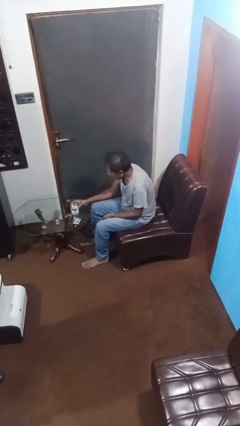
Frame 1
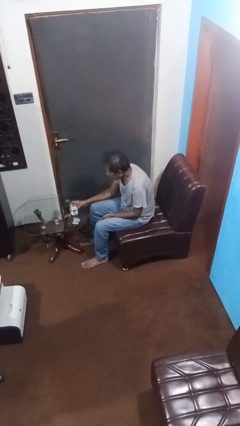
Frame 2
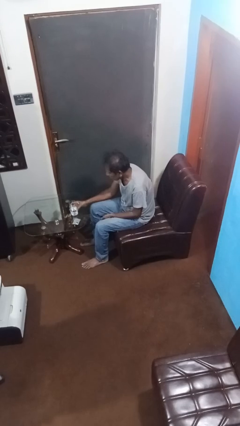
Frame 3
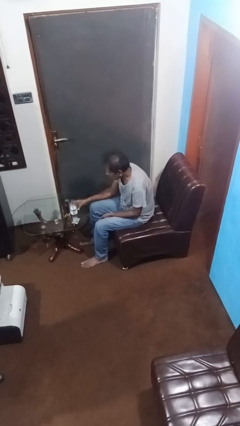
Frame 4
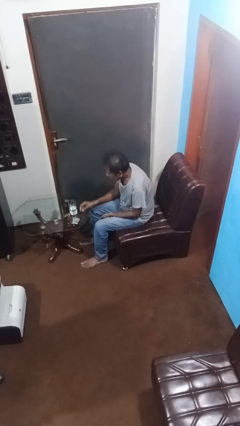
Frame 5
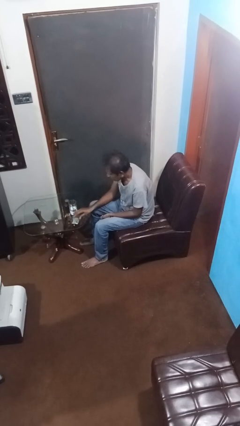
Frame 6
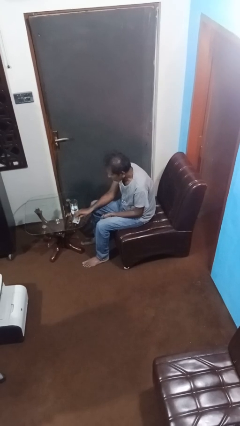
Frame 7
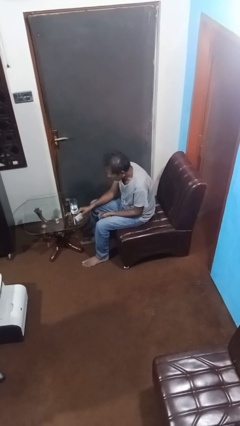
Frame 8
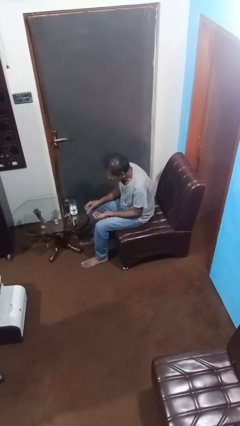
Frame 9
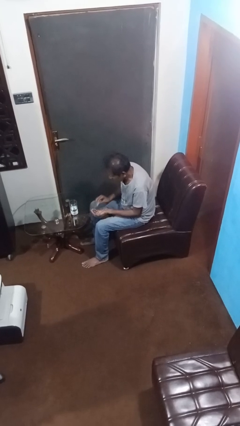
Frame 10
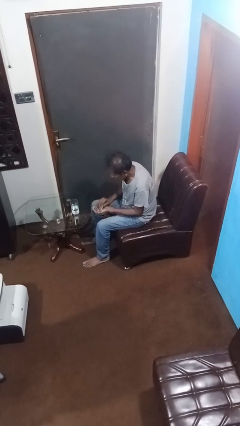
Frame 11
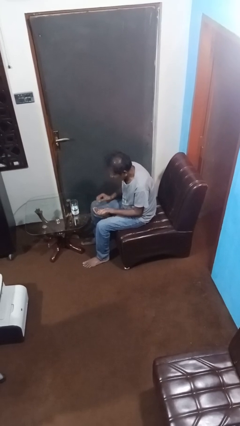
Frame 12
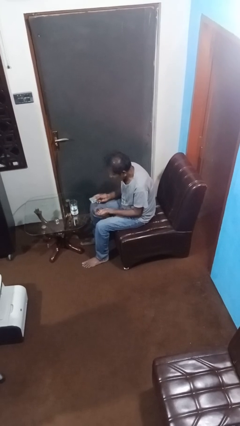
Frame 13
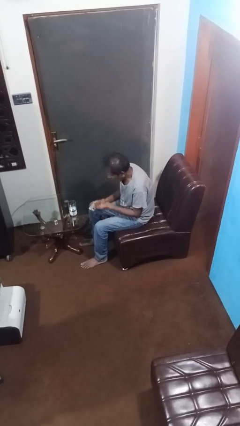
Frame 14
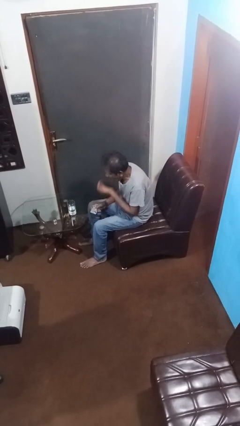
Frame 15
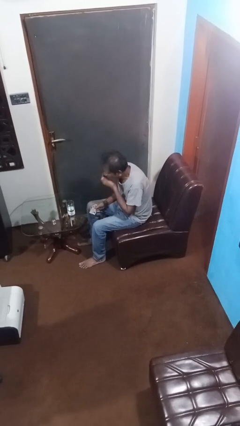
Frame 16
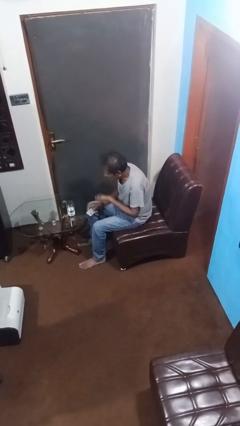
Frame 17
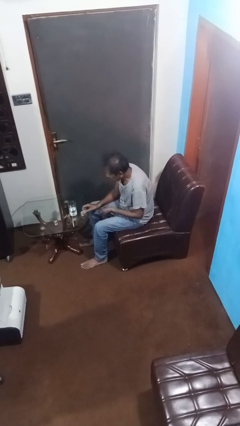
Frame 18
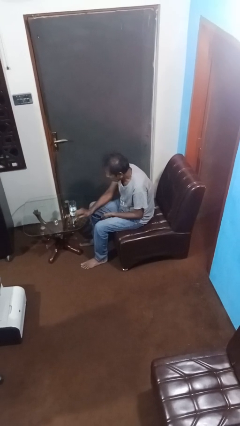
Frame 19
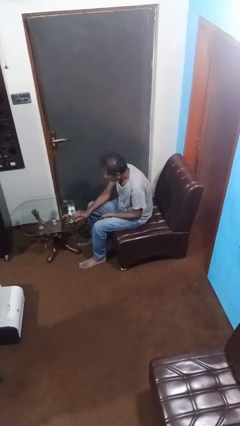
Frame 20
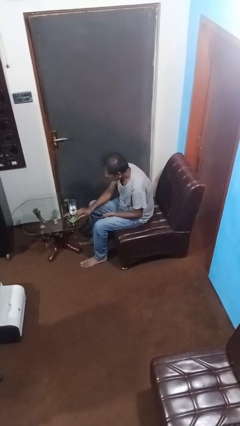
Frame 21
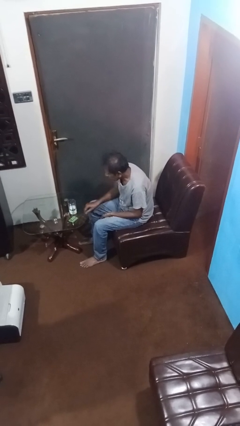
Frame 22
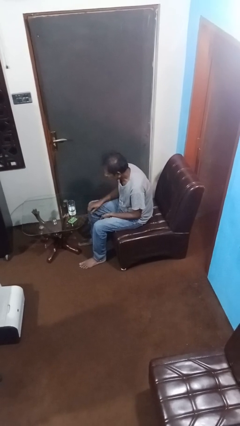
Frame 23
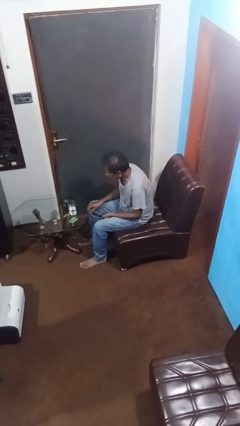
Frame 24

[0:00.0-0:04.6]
person takes medicine pills

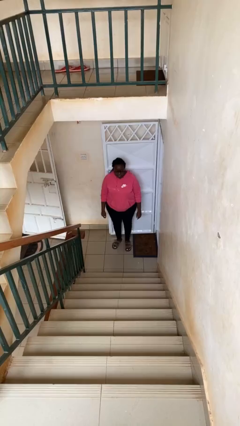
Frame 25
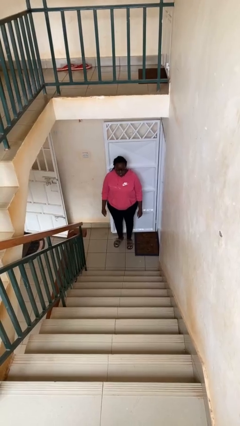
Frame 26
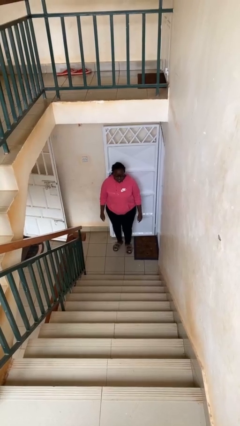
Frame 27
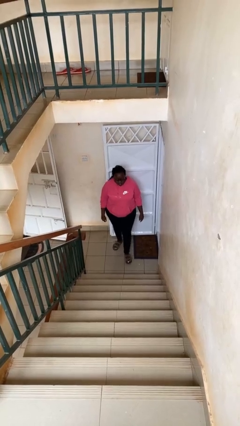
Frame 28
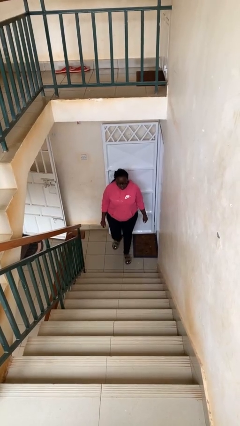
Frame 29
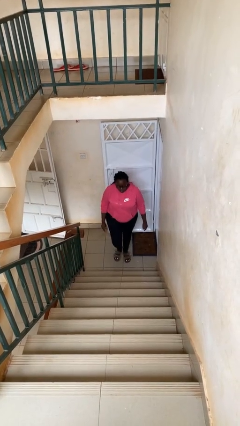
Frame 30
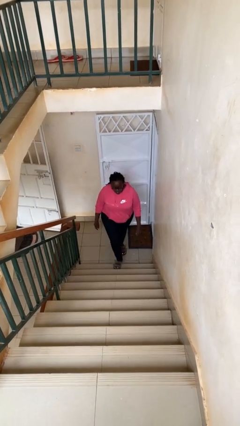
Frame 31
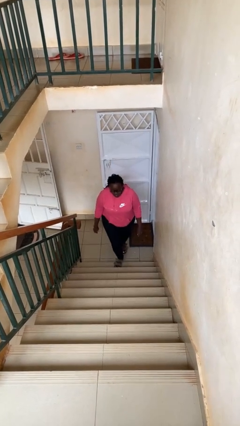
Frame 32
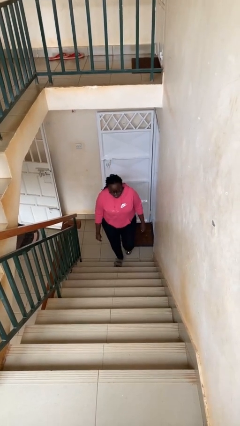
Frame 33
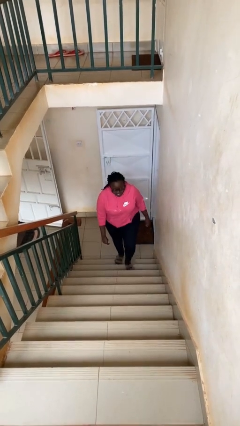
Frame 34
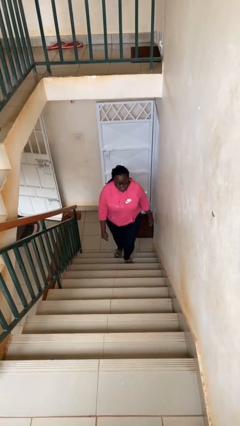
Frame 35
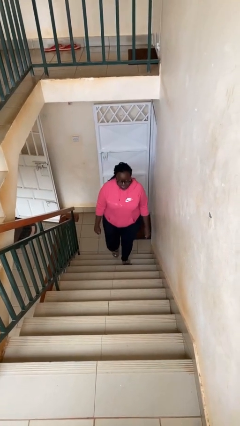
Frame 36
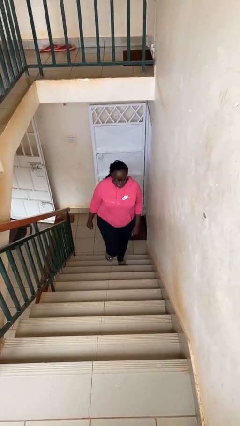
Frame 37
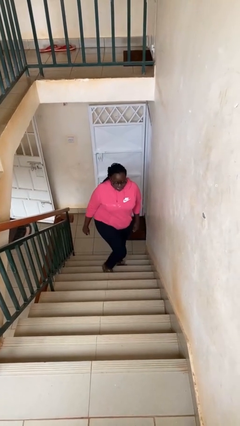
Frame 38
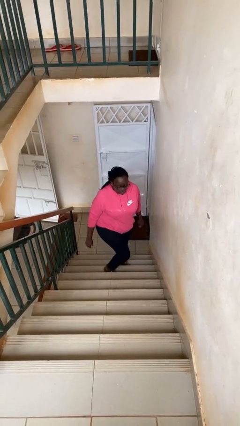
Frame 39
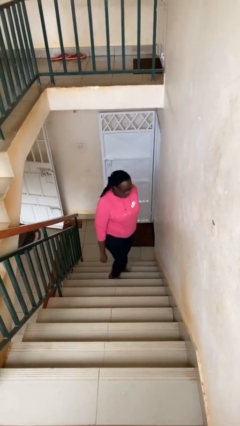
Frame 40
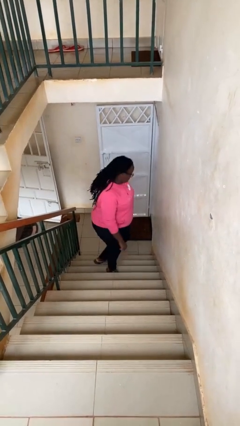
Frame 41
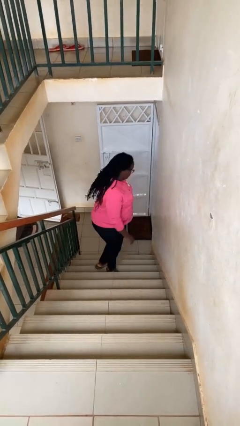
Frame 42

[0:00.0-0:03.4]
person climbs up stairs

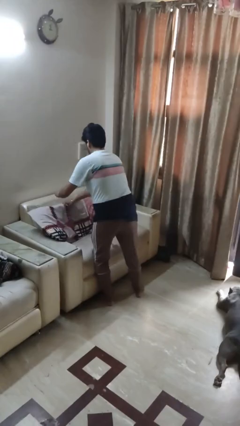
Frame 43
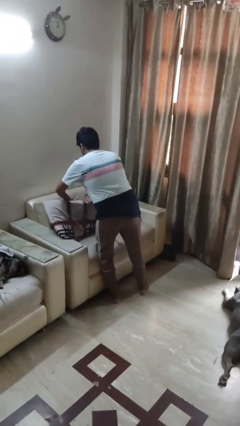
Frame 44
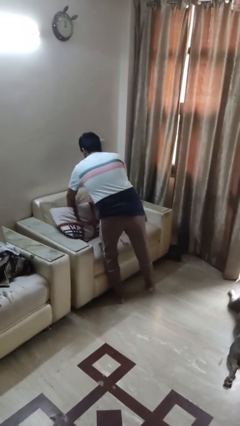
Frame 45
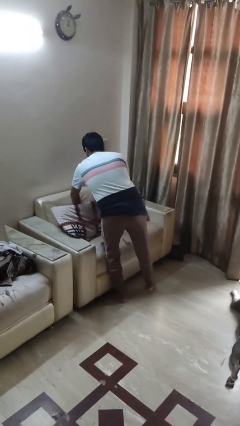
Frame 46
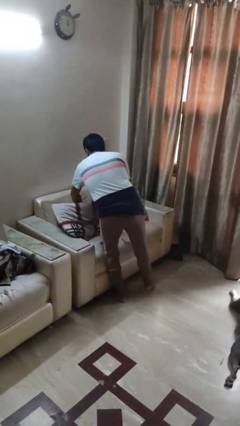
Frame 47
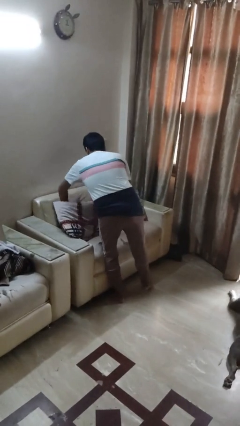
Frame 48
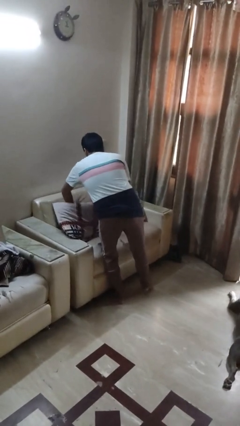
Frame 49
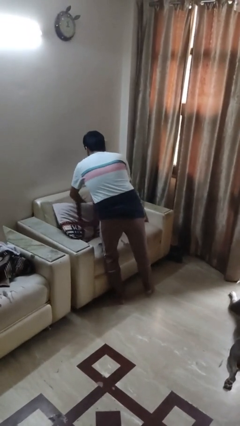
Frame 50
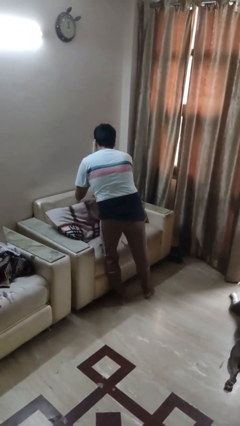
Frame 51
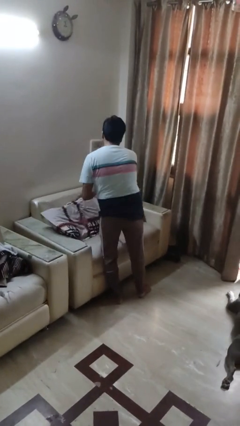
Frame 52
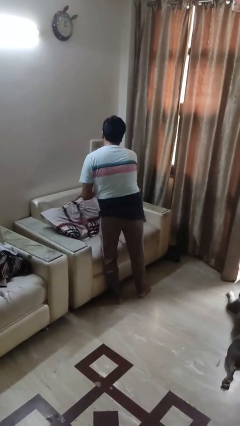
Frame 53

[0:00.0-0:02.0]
person searches in couch

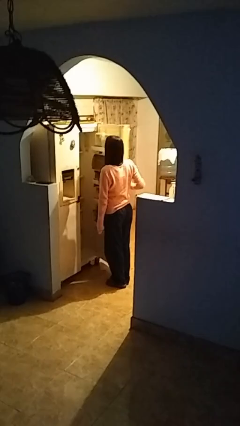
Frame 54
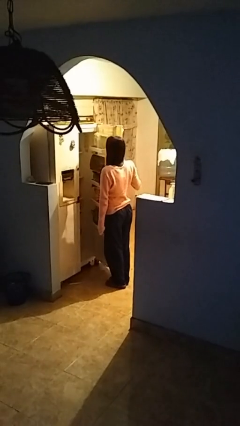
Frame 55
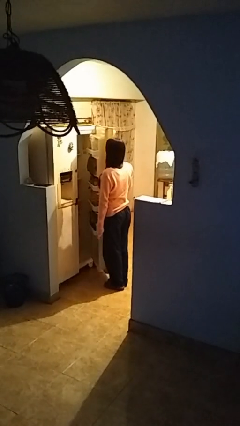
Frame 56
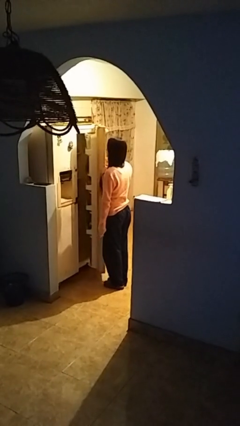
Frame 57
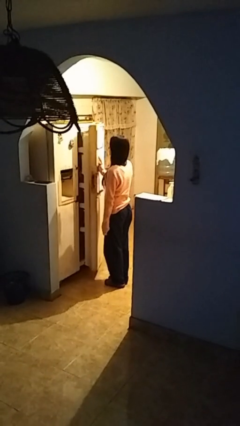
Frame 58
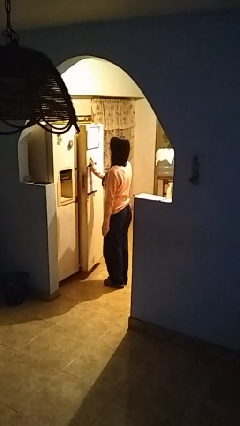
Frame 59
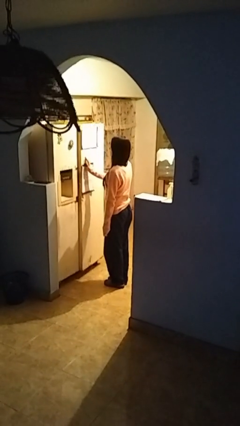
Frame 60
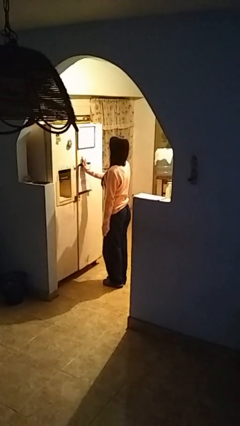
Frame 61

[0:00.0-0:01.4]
person closes refrigerator

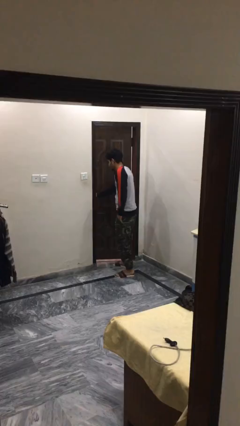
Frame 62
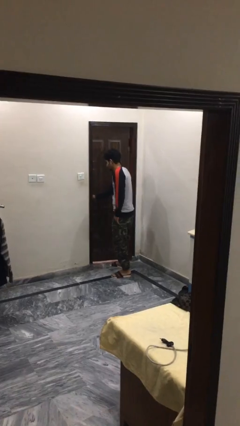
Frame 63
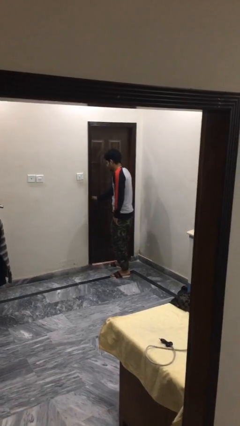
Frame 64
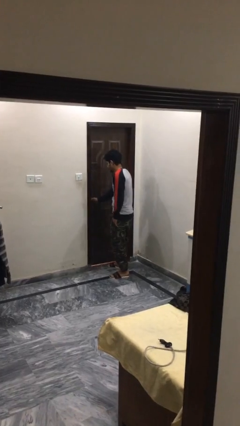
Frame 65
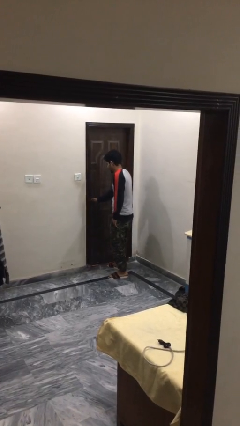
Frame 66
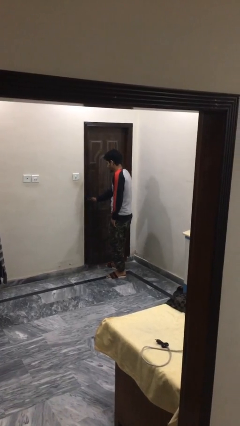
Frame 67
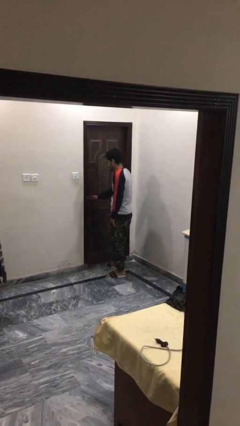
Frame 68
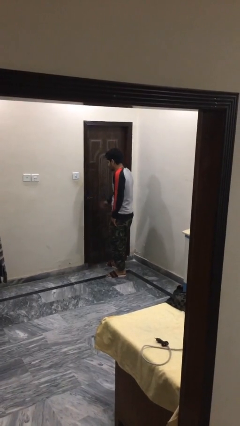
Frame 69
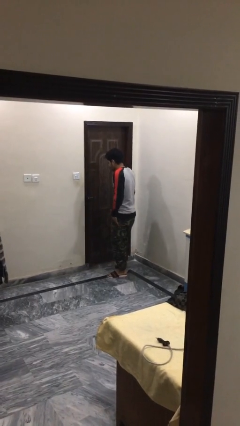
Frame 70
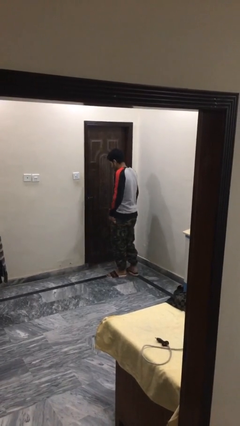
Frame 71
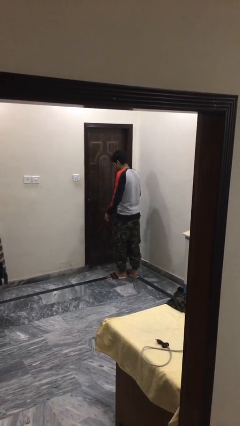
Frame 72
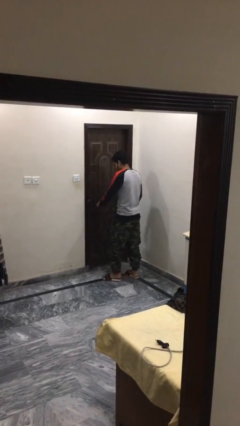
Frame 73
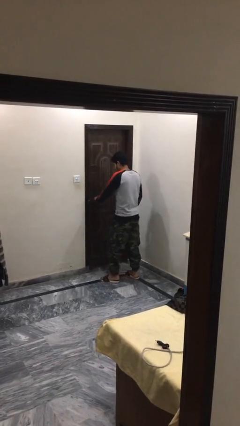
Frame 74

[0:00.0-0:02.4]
person closes facility door

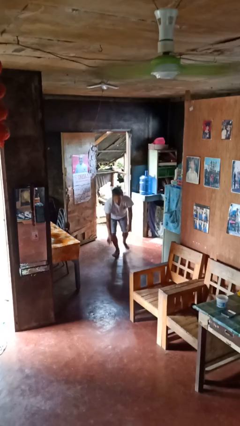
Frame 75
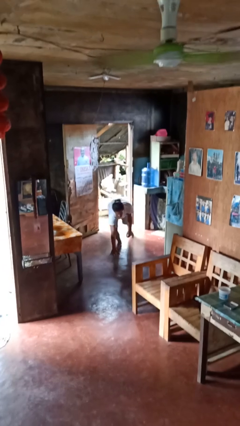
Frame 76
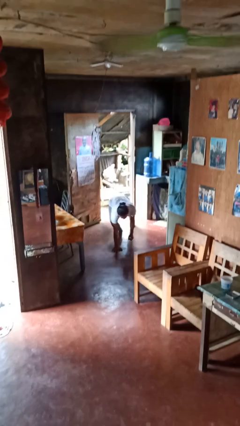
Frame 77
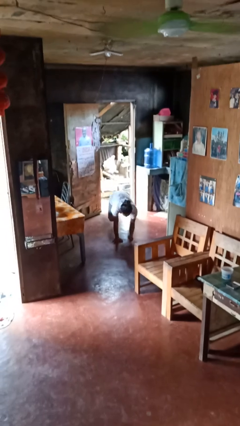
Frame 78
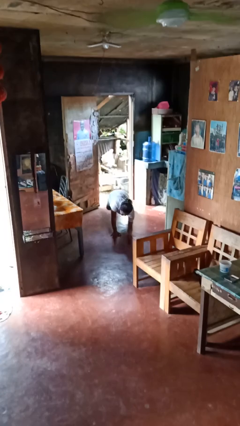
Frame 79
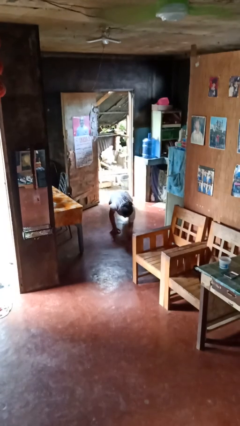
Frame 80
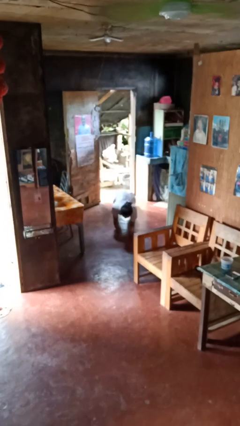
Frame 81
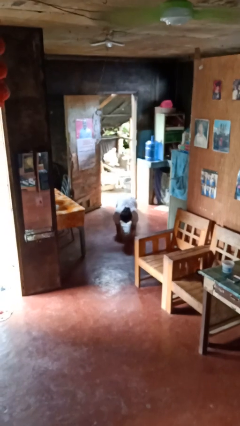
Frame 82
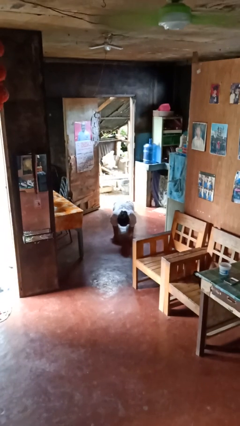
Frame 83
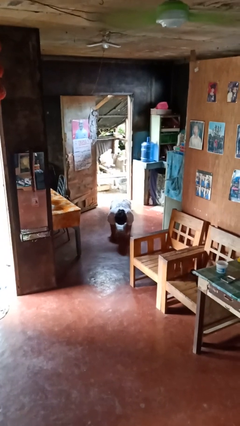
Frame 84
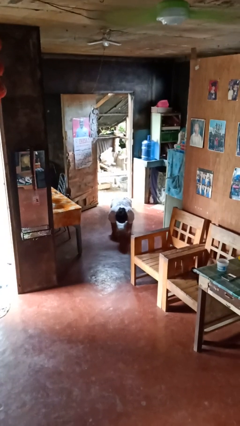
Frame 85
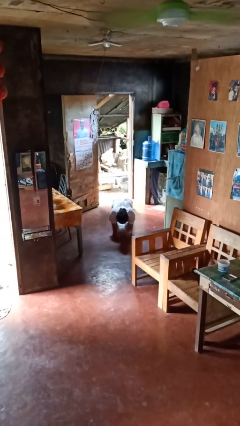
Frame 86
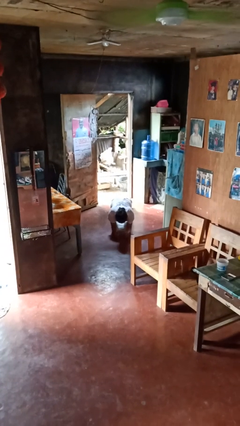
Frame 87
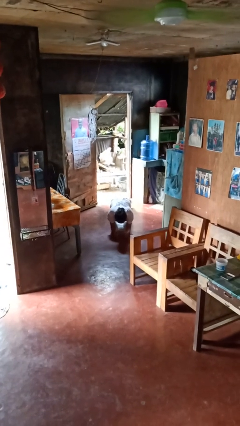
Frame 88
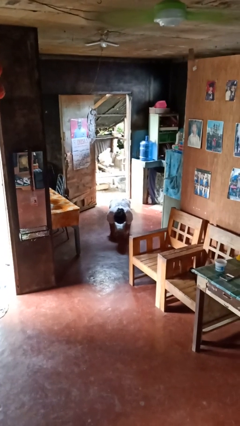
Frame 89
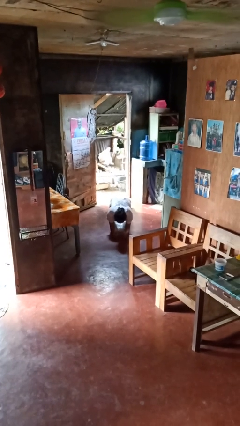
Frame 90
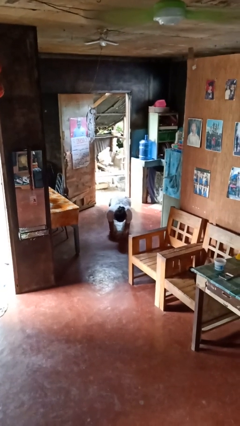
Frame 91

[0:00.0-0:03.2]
person exercises with plank

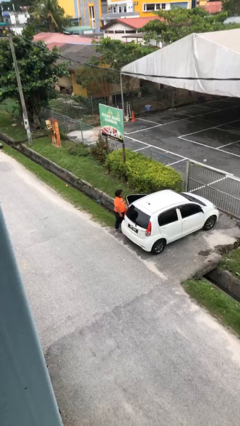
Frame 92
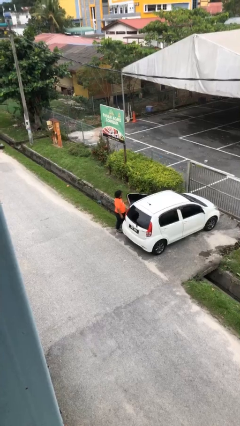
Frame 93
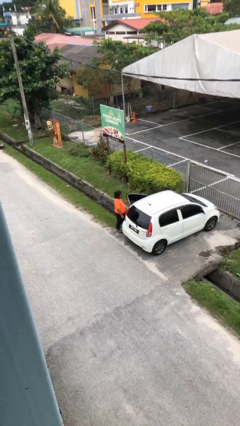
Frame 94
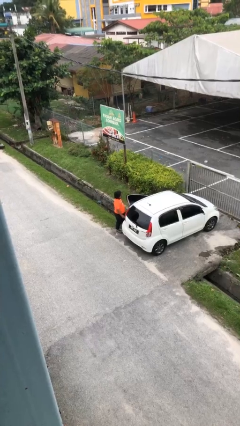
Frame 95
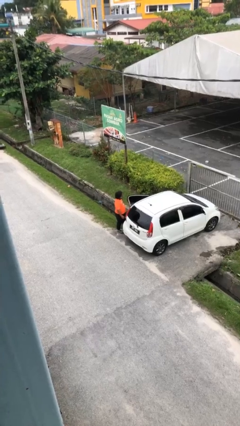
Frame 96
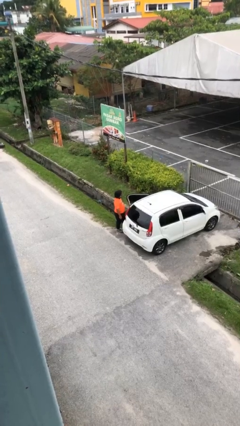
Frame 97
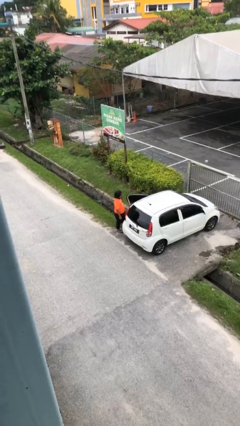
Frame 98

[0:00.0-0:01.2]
person opens car door
